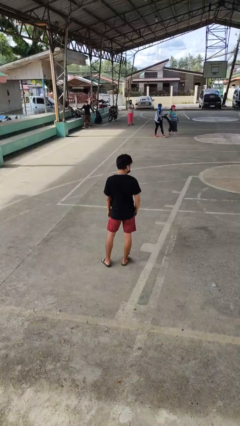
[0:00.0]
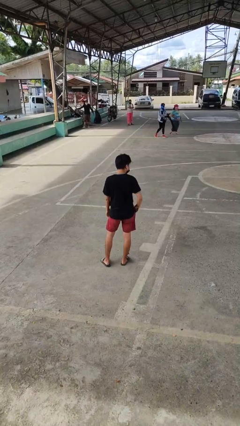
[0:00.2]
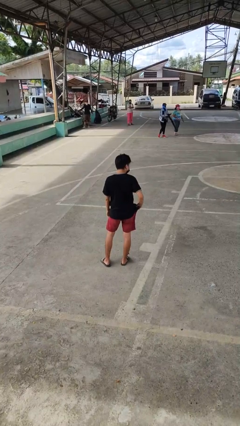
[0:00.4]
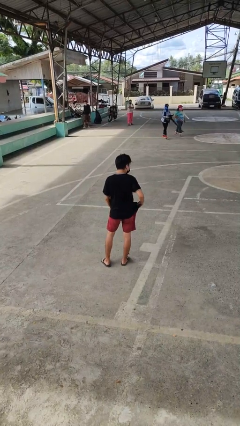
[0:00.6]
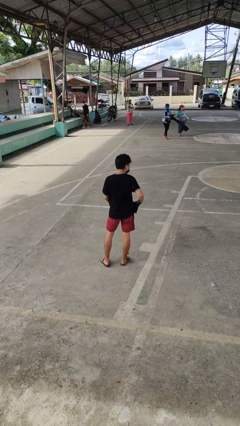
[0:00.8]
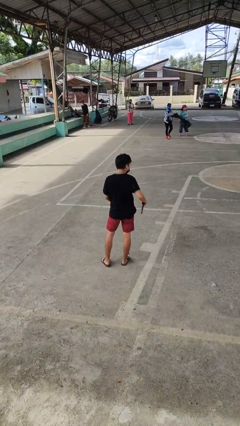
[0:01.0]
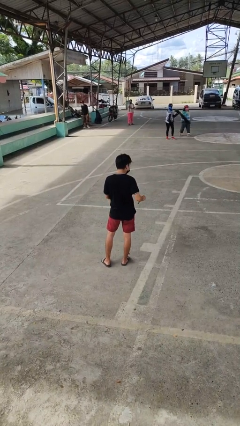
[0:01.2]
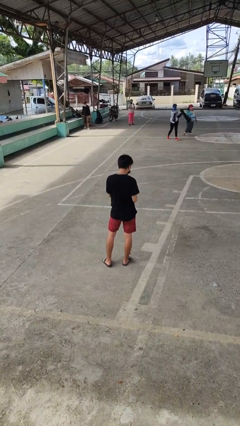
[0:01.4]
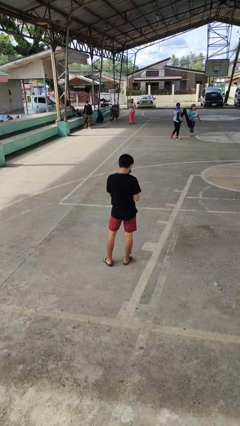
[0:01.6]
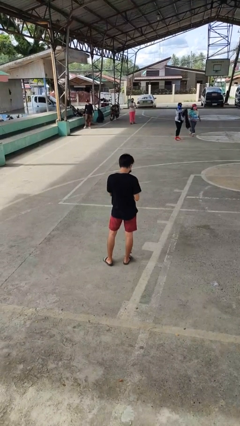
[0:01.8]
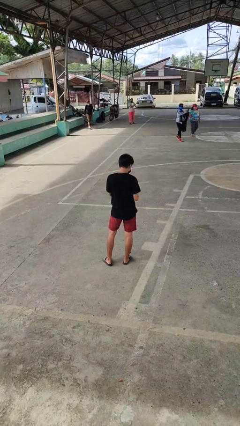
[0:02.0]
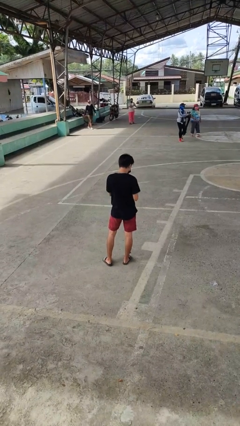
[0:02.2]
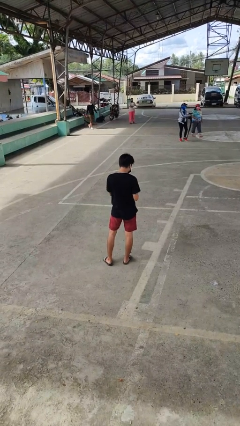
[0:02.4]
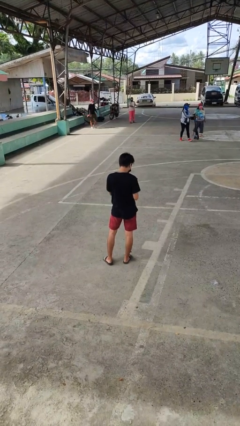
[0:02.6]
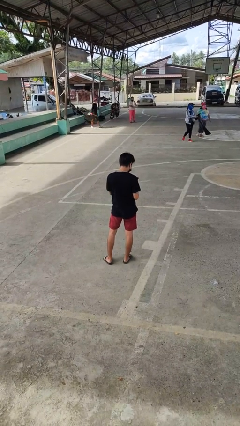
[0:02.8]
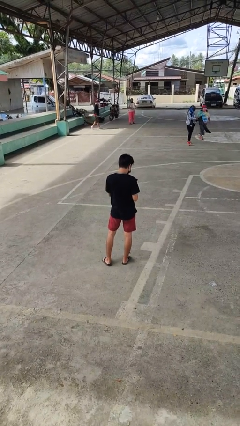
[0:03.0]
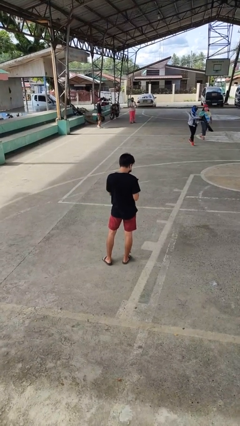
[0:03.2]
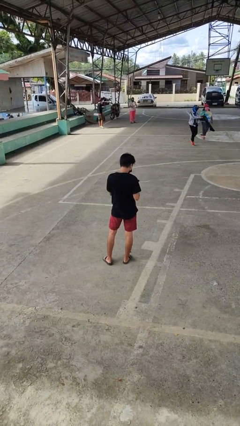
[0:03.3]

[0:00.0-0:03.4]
person takes phone from pocket

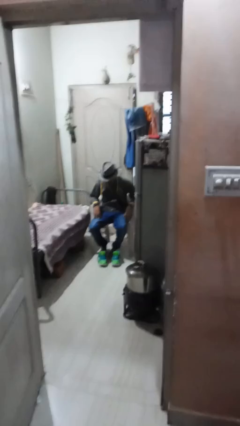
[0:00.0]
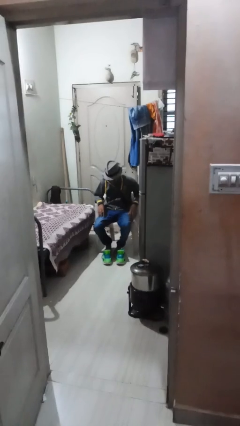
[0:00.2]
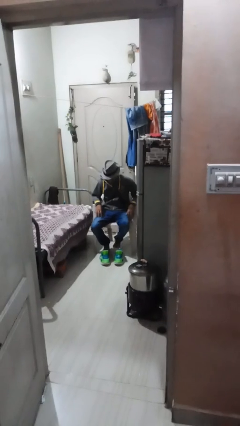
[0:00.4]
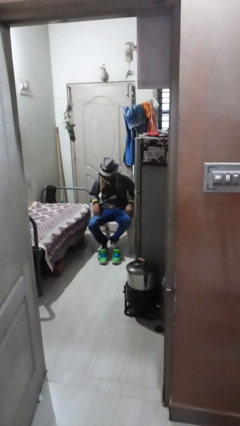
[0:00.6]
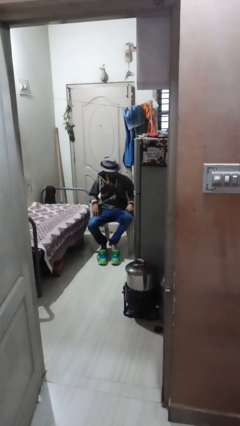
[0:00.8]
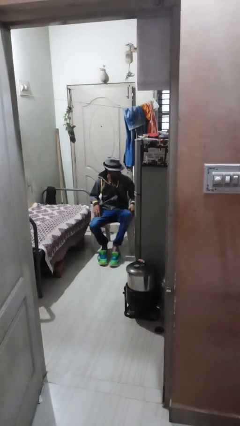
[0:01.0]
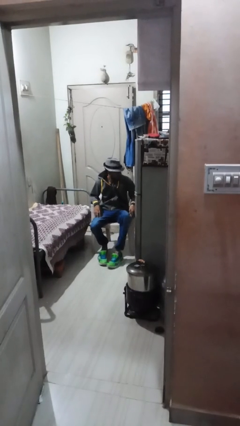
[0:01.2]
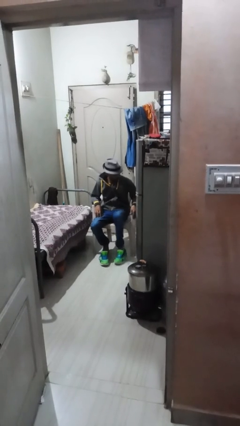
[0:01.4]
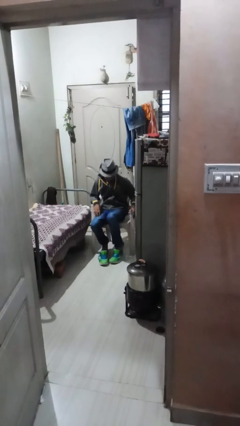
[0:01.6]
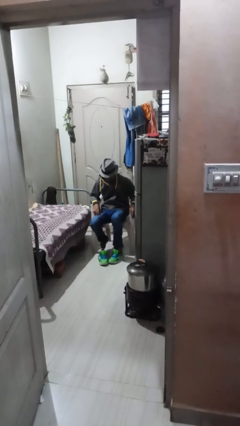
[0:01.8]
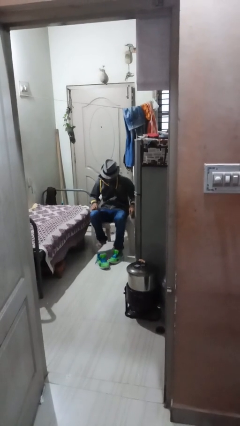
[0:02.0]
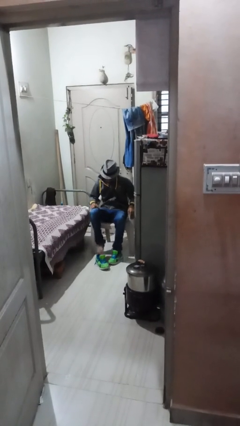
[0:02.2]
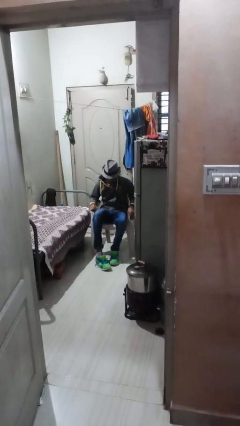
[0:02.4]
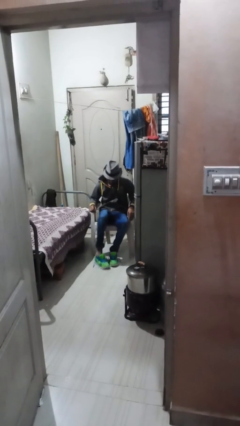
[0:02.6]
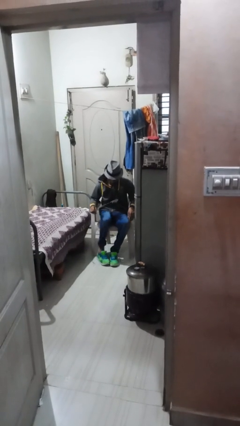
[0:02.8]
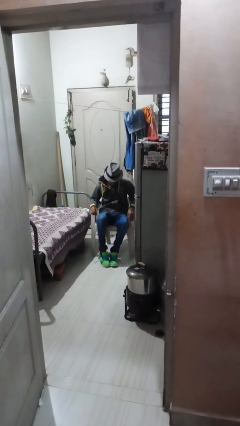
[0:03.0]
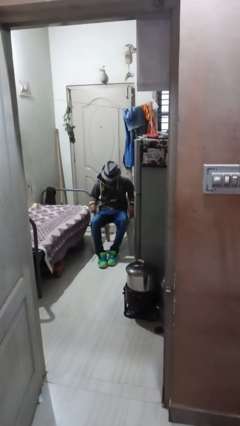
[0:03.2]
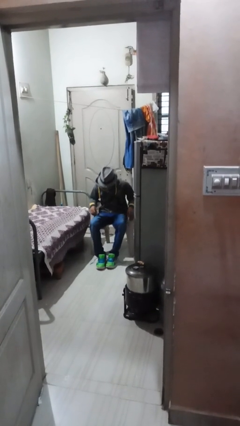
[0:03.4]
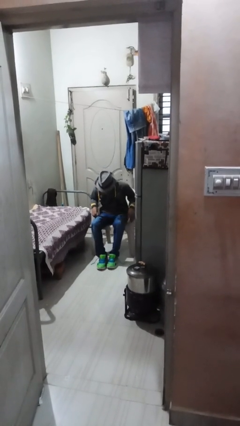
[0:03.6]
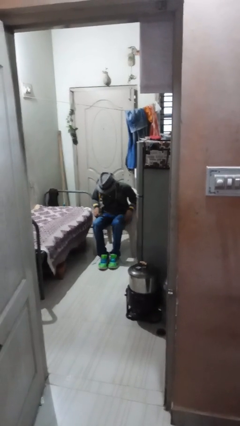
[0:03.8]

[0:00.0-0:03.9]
person puts on shoes

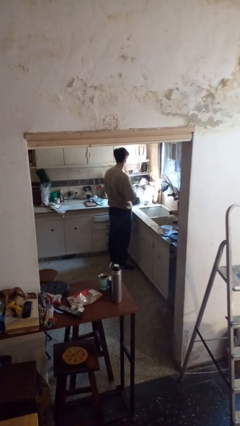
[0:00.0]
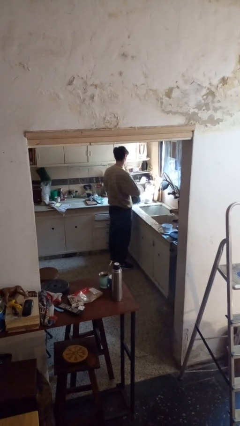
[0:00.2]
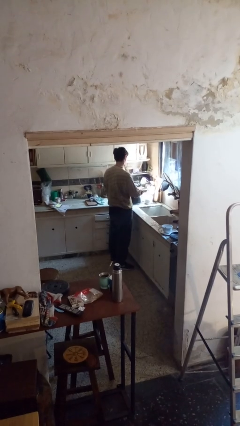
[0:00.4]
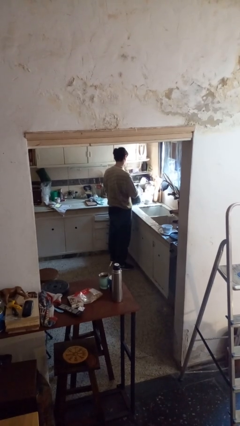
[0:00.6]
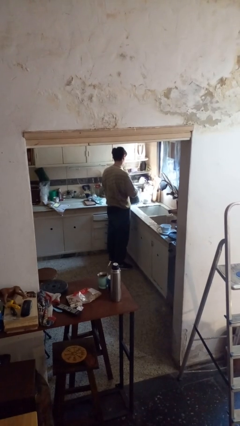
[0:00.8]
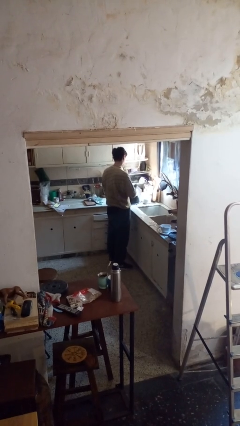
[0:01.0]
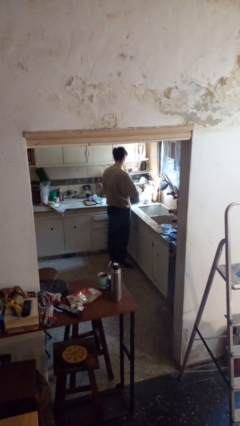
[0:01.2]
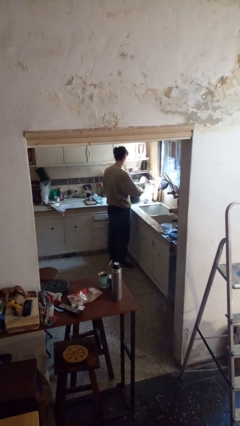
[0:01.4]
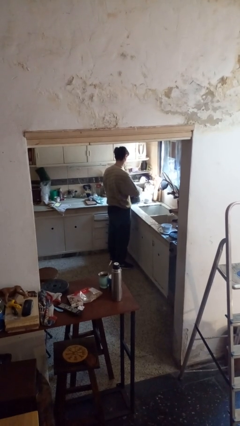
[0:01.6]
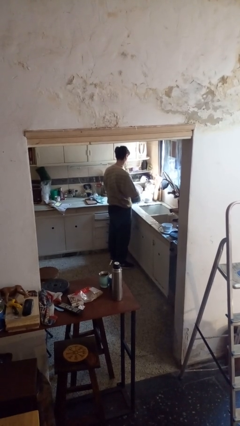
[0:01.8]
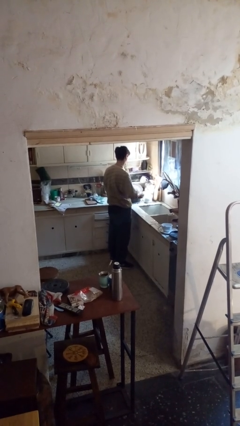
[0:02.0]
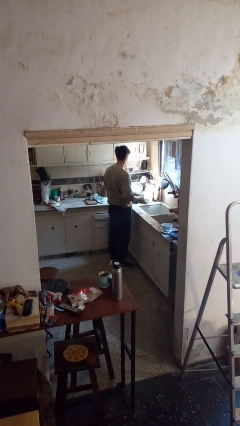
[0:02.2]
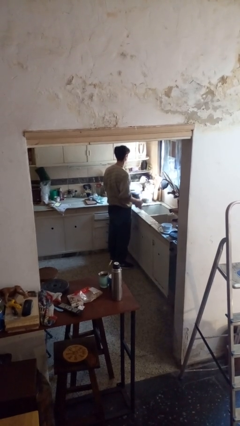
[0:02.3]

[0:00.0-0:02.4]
person dries dish

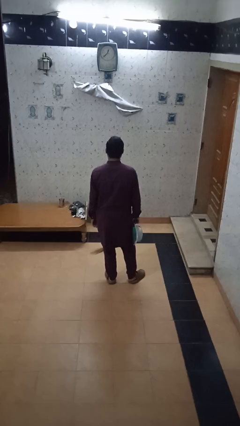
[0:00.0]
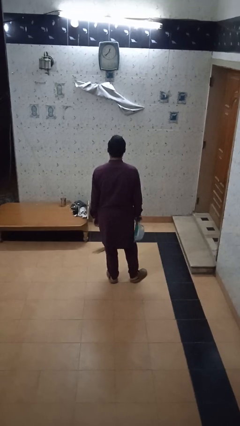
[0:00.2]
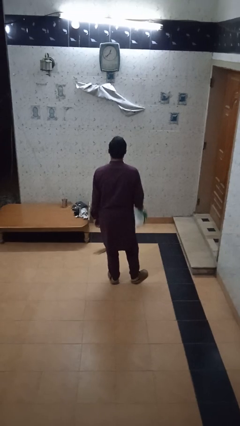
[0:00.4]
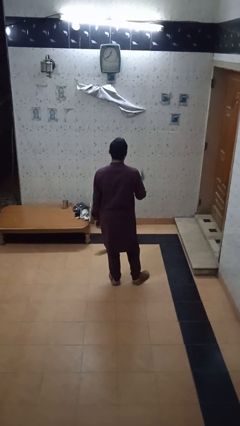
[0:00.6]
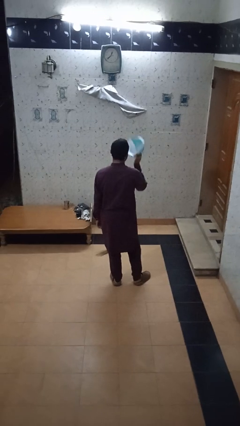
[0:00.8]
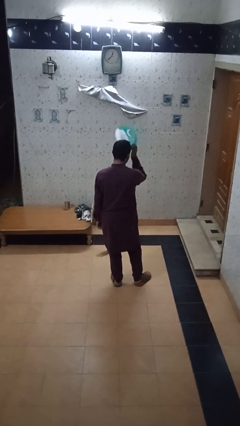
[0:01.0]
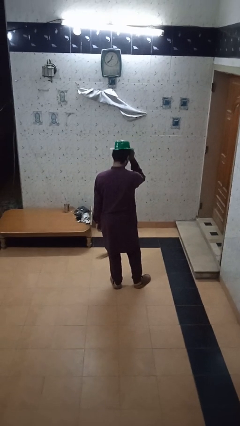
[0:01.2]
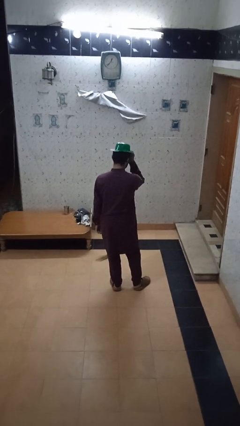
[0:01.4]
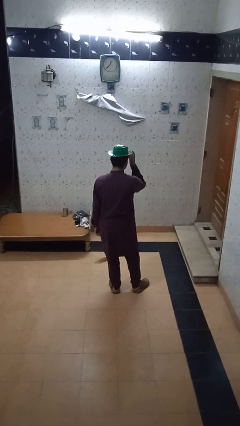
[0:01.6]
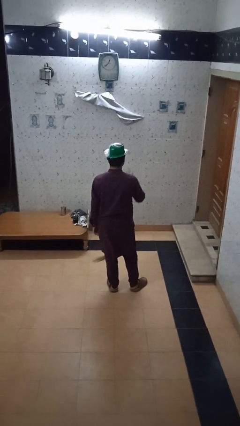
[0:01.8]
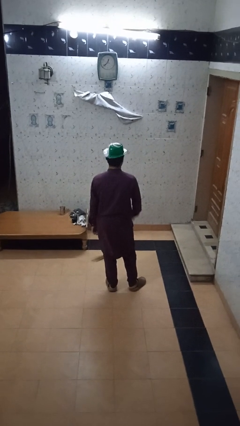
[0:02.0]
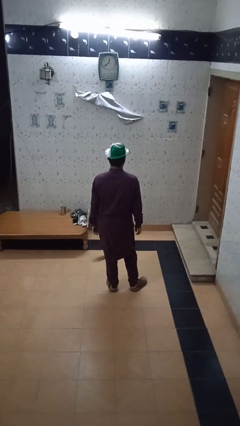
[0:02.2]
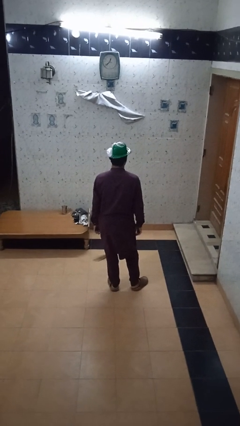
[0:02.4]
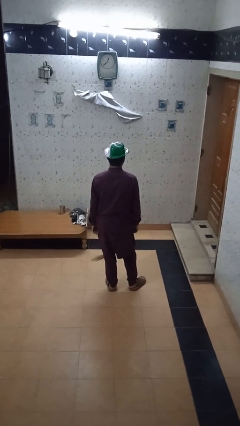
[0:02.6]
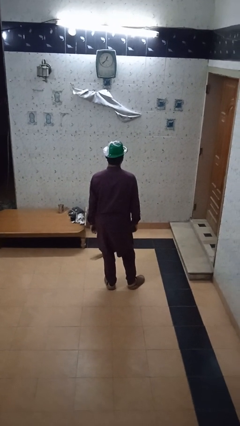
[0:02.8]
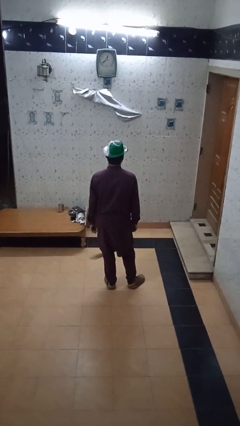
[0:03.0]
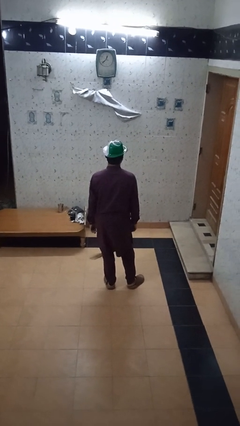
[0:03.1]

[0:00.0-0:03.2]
person puts on hat

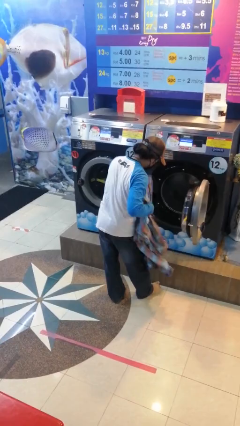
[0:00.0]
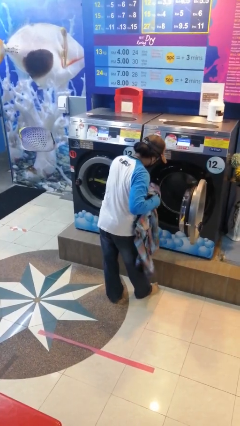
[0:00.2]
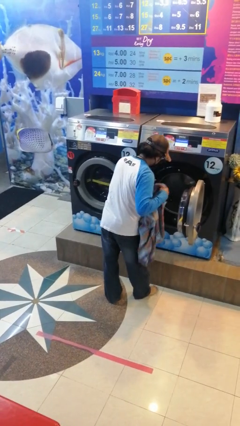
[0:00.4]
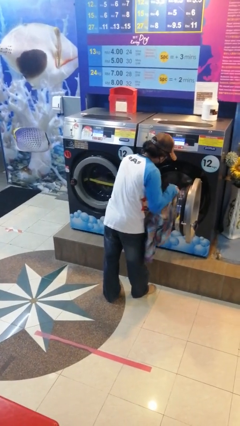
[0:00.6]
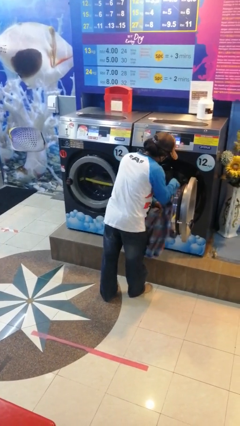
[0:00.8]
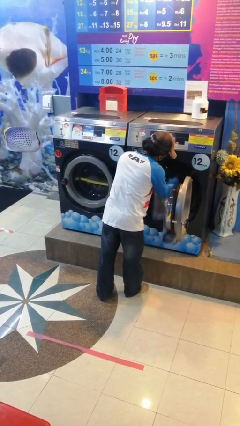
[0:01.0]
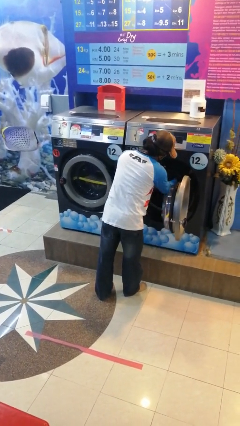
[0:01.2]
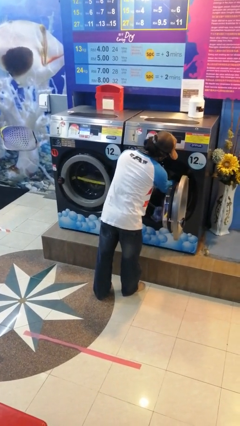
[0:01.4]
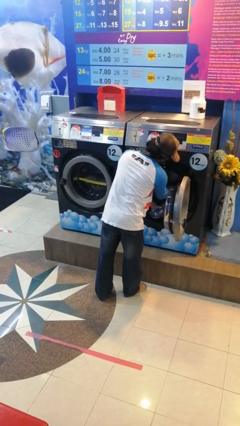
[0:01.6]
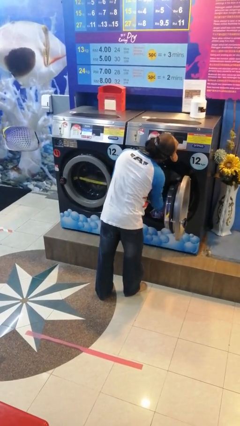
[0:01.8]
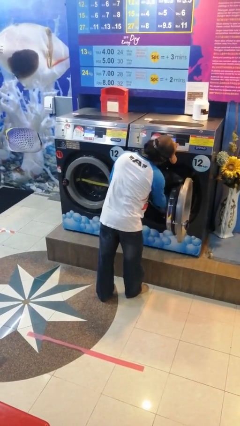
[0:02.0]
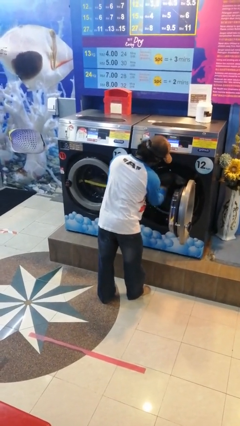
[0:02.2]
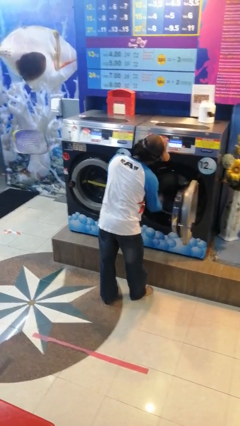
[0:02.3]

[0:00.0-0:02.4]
person loads clotheswasher

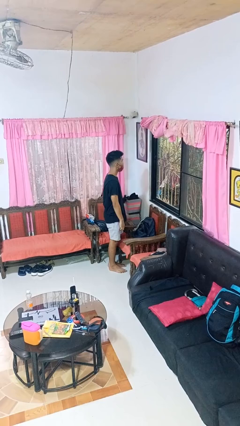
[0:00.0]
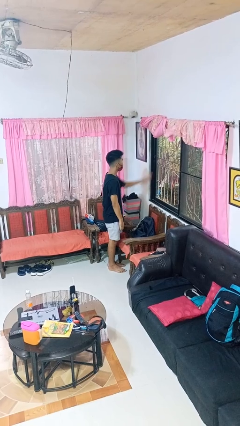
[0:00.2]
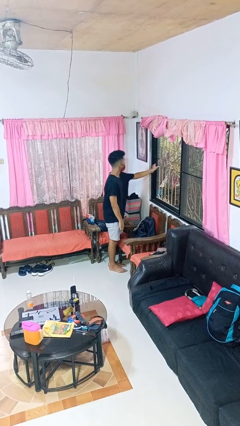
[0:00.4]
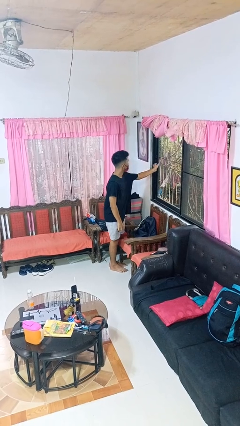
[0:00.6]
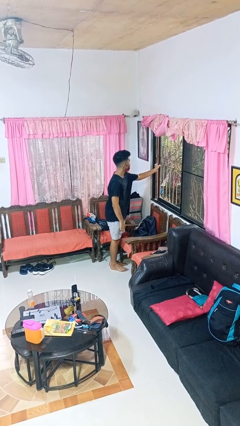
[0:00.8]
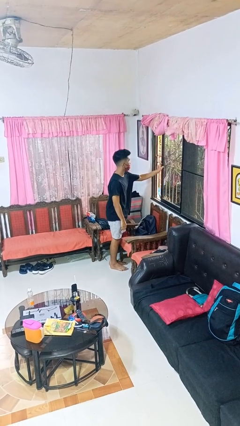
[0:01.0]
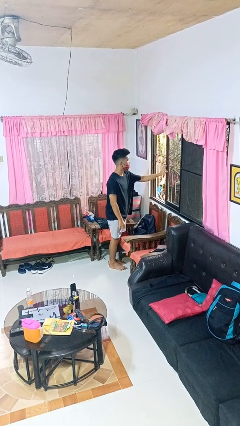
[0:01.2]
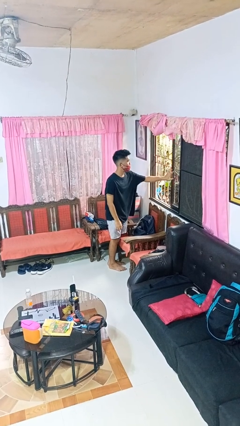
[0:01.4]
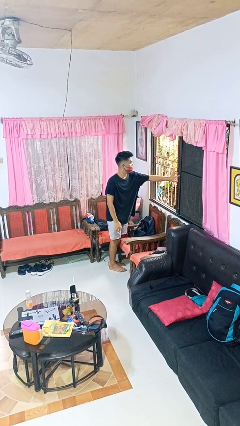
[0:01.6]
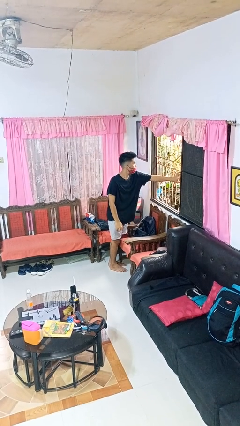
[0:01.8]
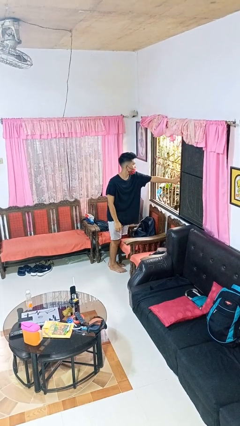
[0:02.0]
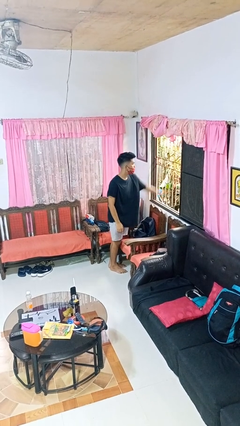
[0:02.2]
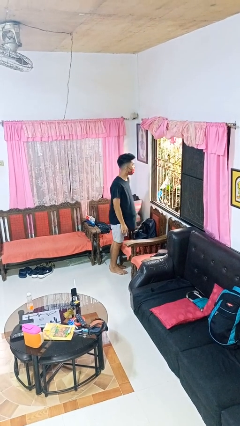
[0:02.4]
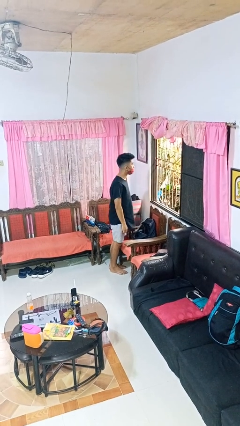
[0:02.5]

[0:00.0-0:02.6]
person opens home window
